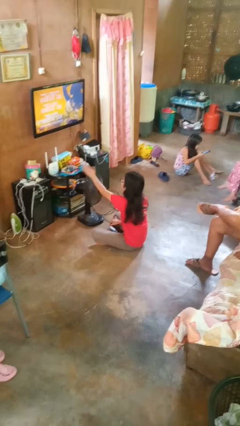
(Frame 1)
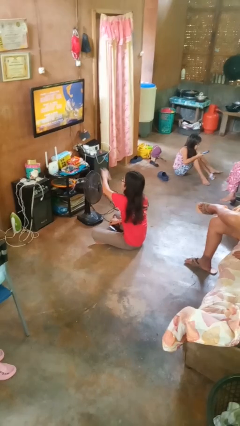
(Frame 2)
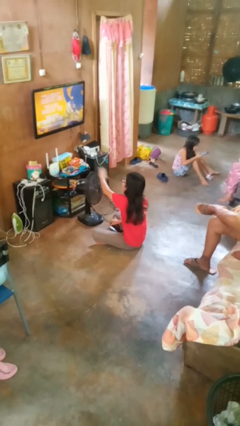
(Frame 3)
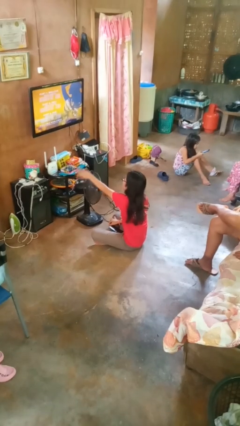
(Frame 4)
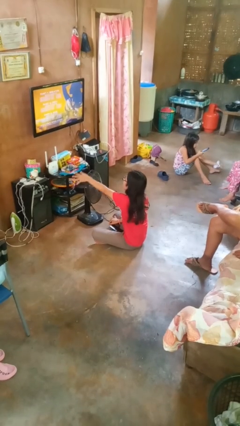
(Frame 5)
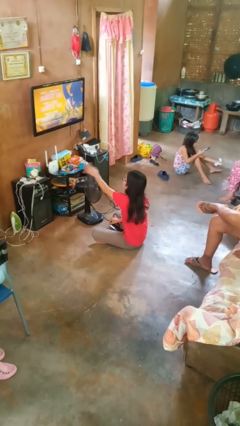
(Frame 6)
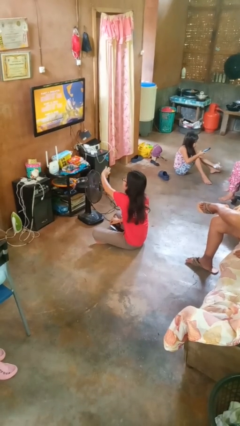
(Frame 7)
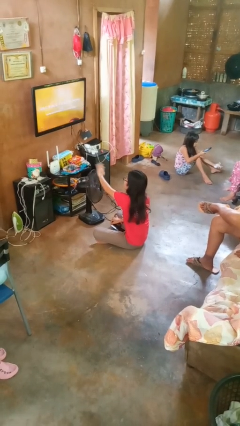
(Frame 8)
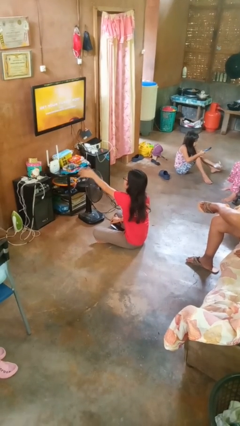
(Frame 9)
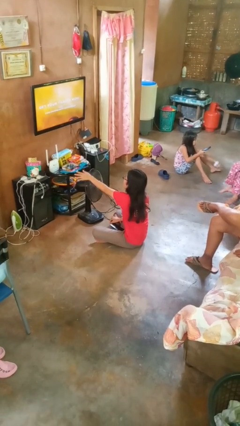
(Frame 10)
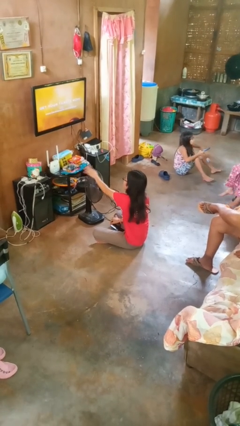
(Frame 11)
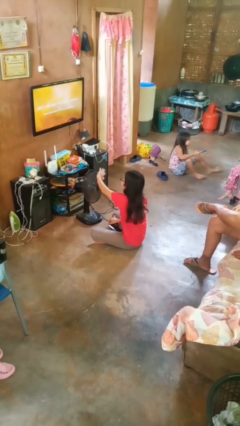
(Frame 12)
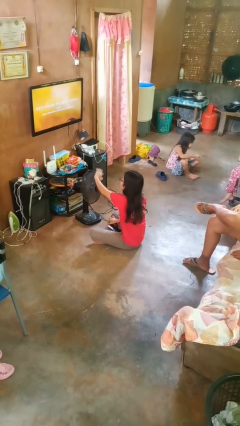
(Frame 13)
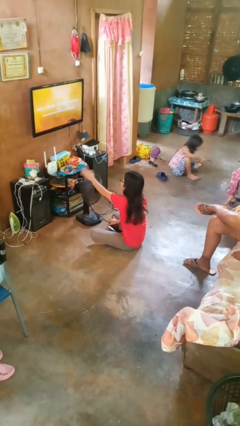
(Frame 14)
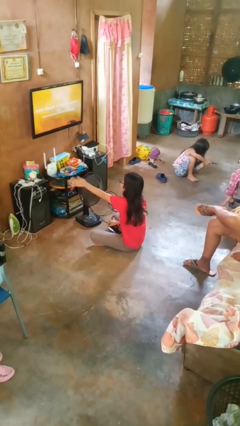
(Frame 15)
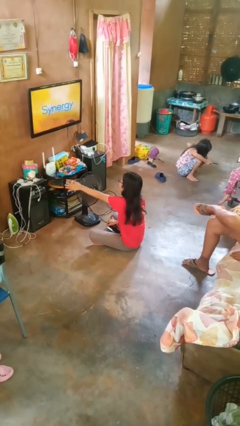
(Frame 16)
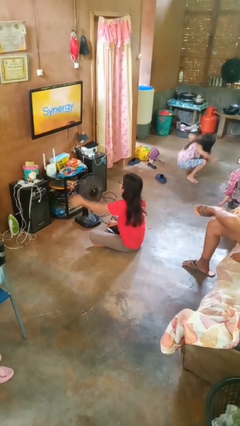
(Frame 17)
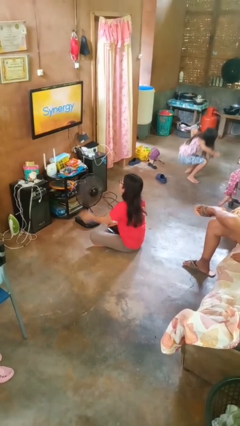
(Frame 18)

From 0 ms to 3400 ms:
person waves hand over object

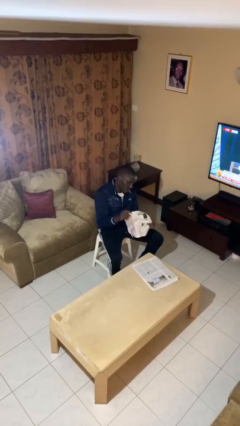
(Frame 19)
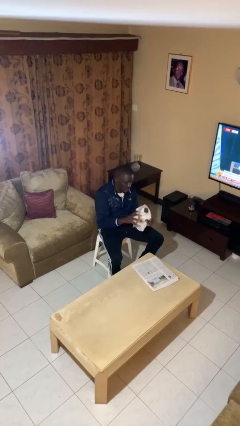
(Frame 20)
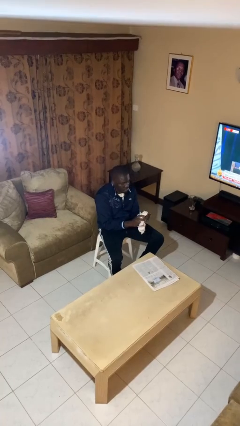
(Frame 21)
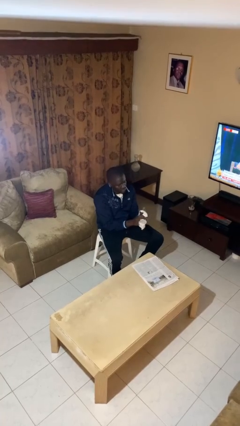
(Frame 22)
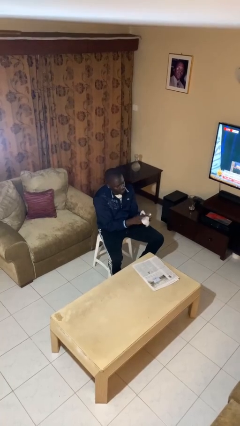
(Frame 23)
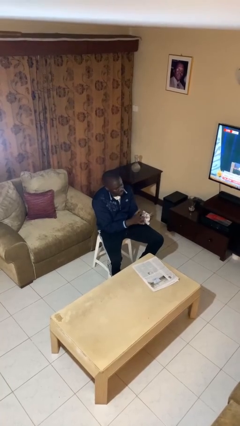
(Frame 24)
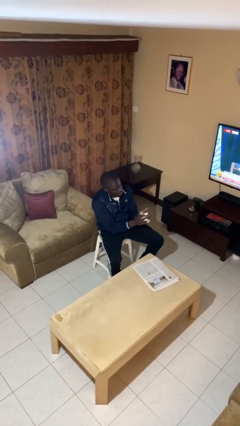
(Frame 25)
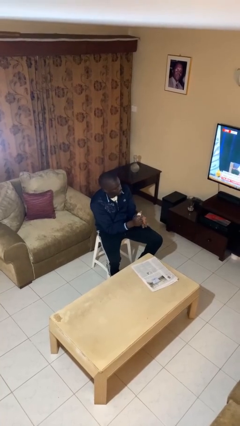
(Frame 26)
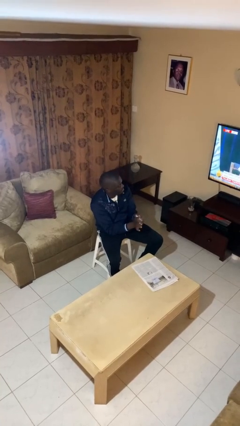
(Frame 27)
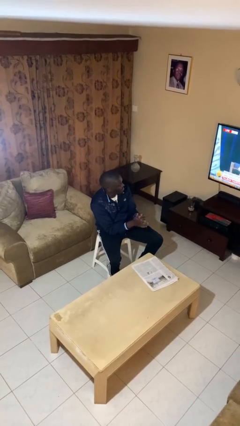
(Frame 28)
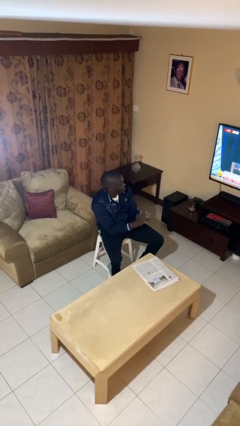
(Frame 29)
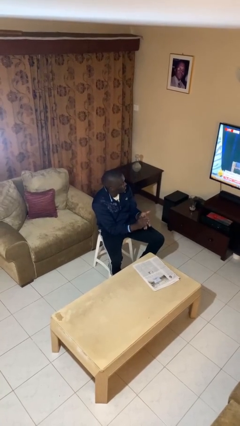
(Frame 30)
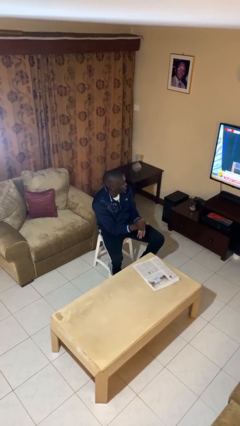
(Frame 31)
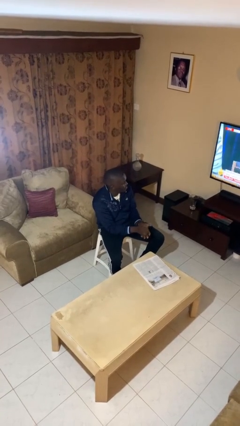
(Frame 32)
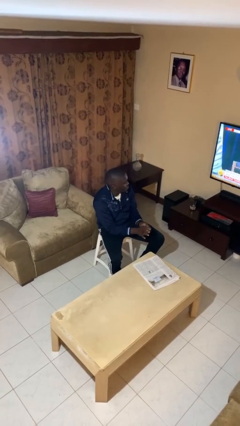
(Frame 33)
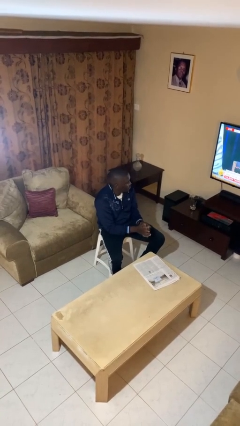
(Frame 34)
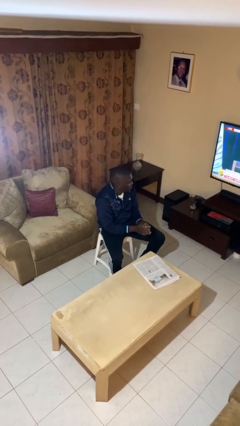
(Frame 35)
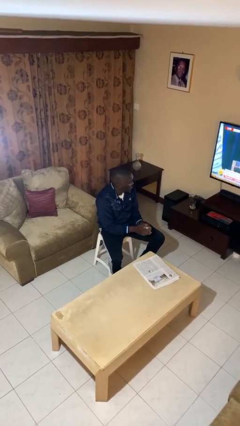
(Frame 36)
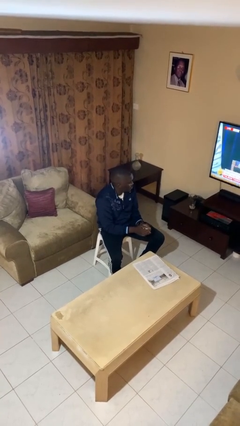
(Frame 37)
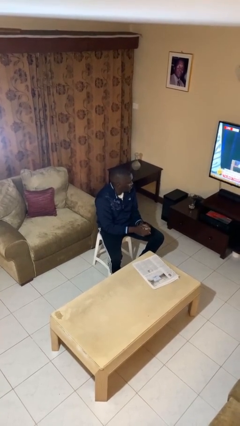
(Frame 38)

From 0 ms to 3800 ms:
person crumples paper

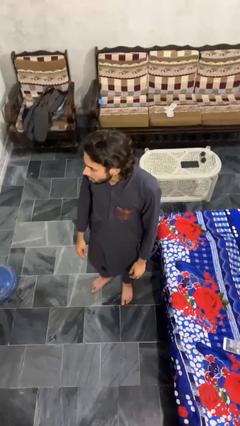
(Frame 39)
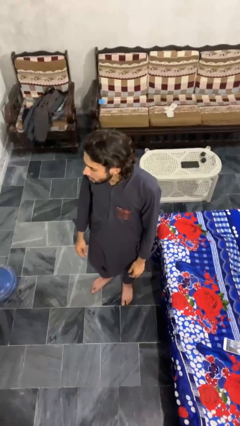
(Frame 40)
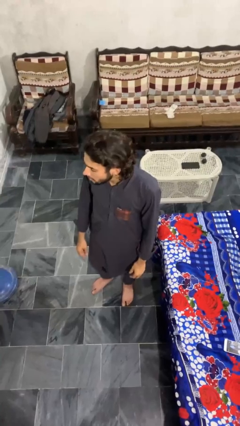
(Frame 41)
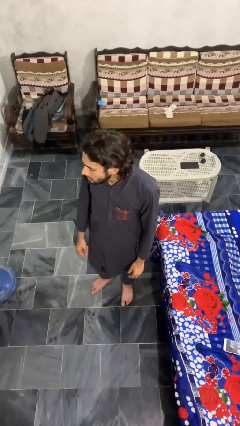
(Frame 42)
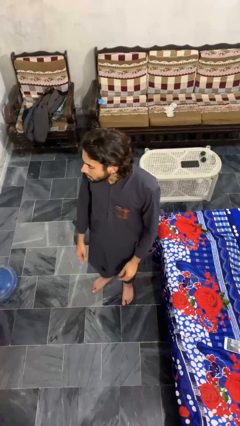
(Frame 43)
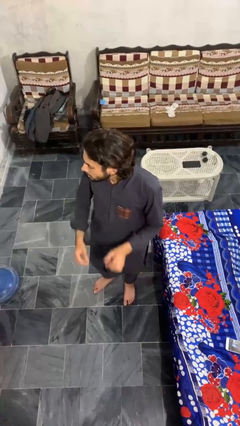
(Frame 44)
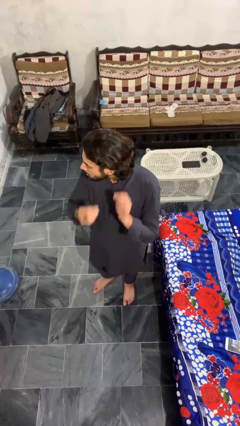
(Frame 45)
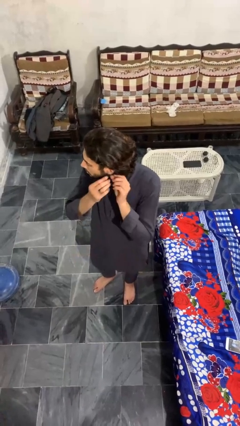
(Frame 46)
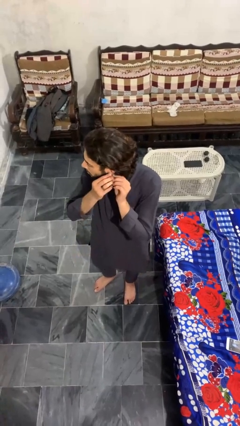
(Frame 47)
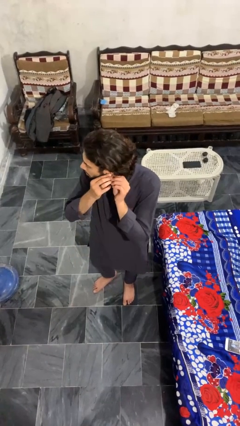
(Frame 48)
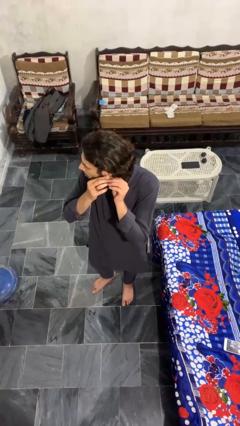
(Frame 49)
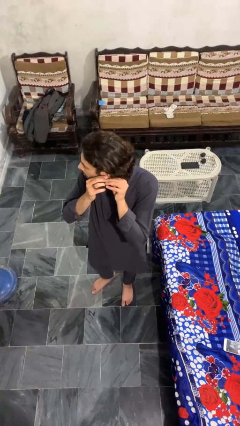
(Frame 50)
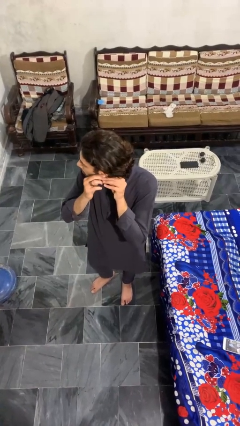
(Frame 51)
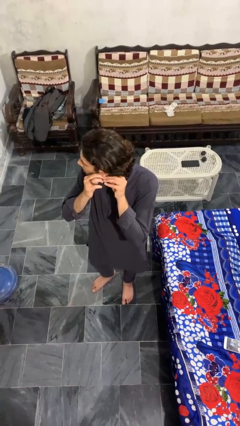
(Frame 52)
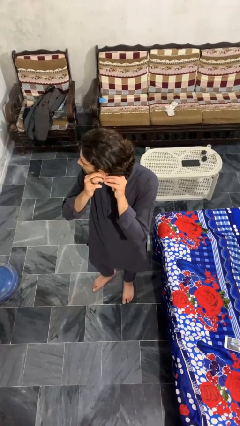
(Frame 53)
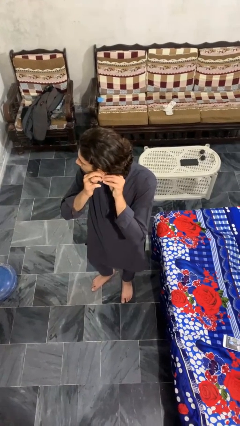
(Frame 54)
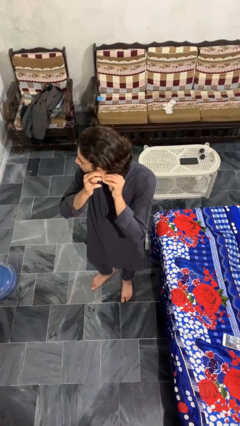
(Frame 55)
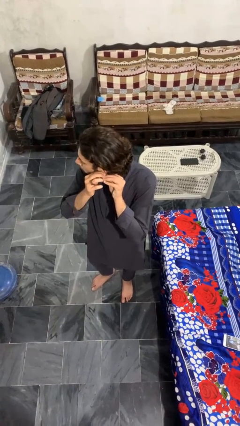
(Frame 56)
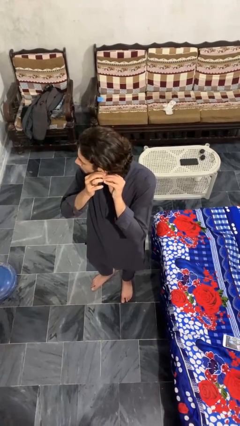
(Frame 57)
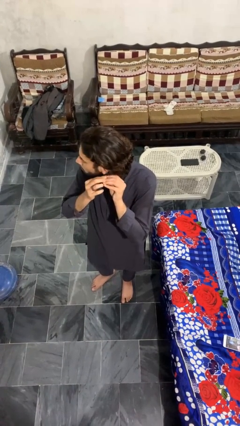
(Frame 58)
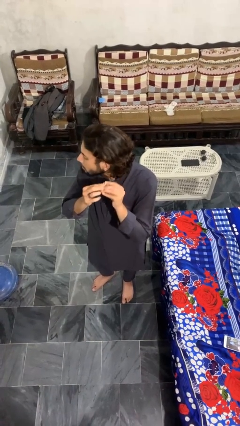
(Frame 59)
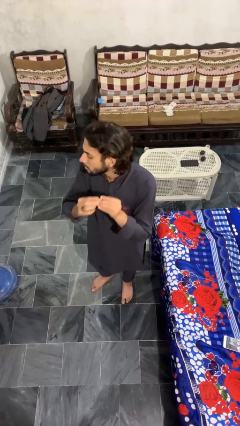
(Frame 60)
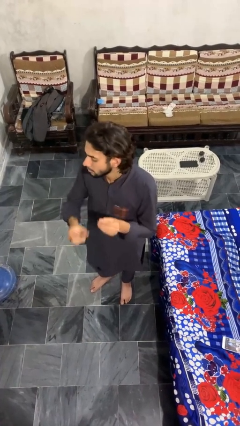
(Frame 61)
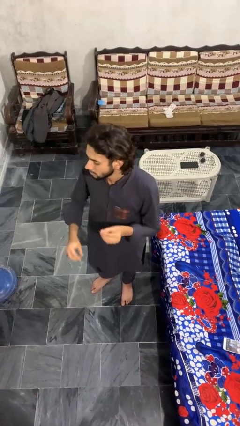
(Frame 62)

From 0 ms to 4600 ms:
person takes off earrings

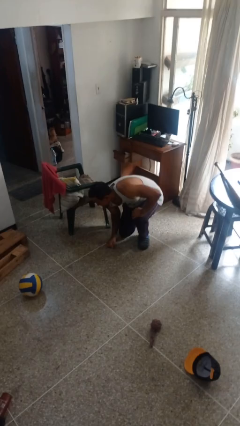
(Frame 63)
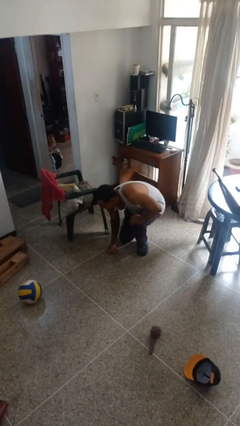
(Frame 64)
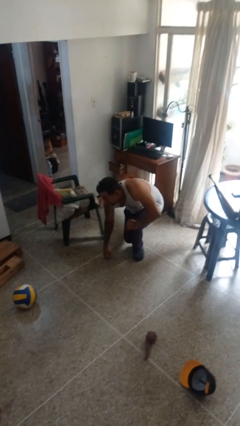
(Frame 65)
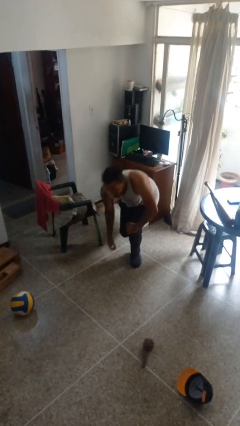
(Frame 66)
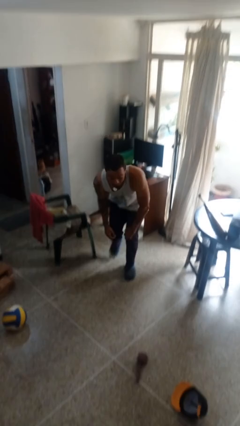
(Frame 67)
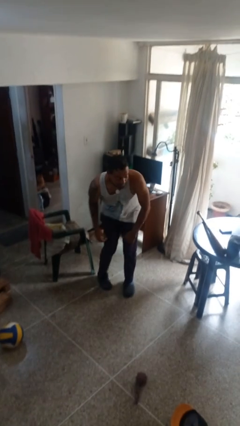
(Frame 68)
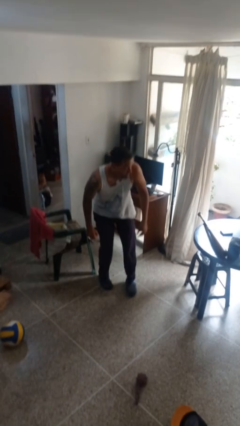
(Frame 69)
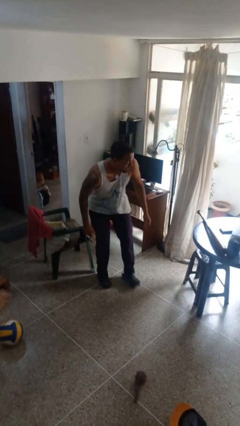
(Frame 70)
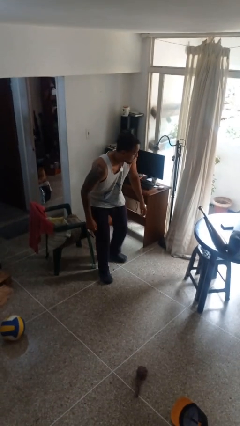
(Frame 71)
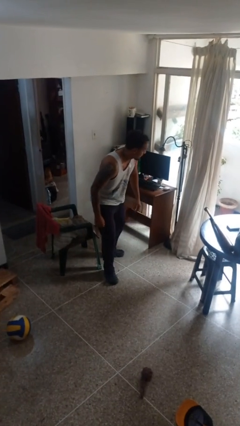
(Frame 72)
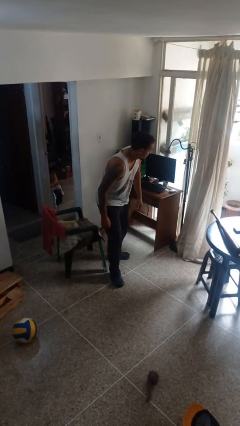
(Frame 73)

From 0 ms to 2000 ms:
person stands up from floor

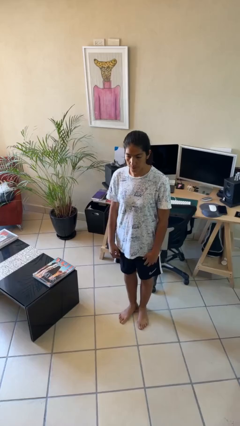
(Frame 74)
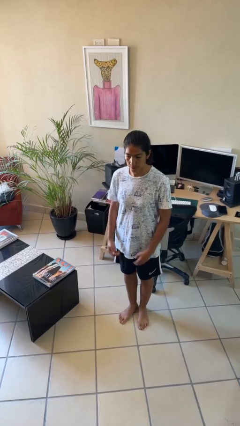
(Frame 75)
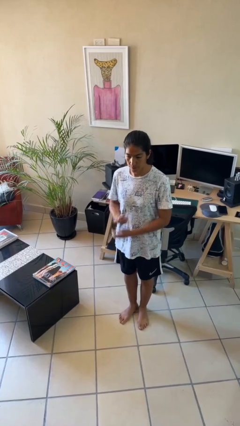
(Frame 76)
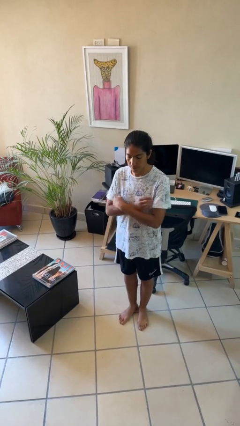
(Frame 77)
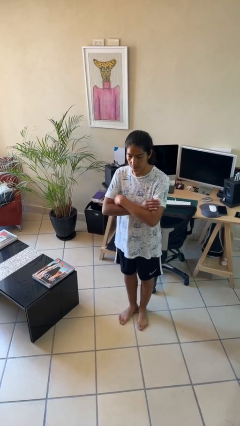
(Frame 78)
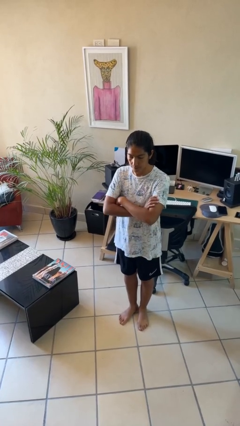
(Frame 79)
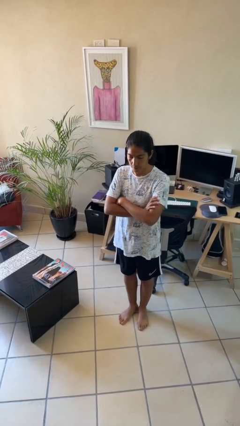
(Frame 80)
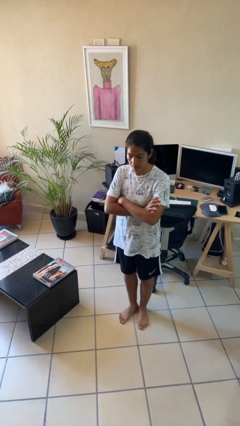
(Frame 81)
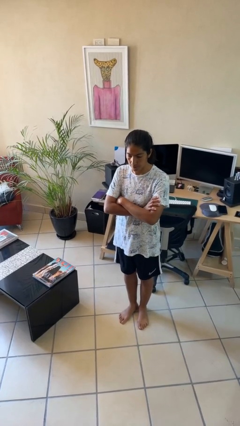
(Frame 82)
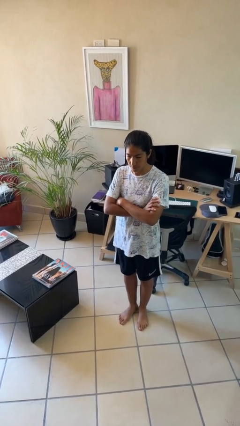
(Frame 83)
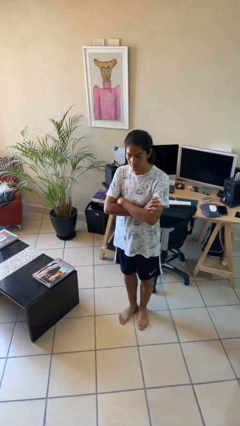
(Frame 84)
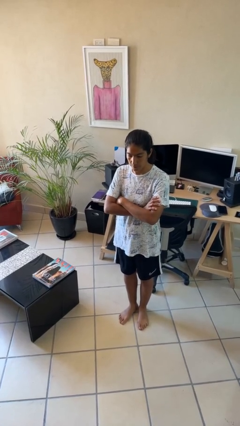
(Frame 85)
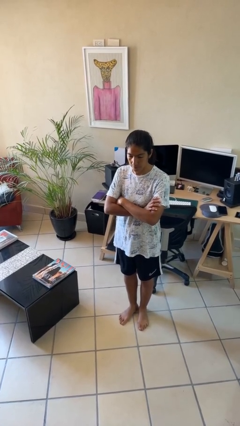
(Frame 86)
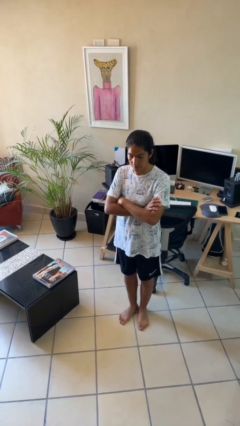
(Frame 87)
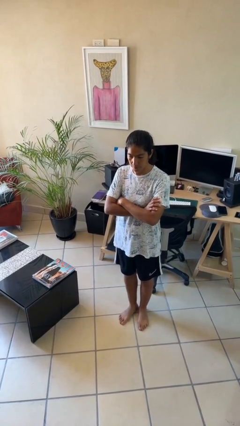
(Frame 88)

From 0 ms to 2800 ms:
person crosses arms

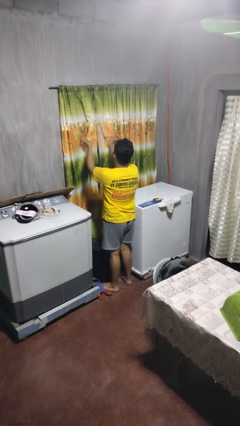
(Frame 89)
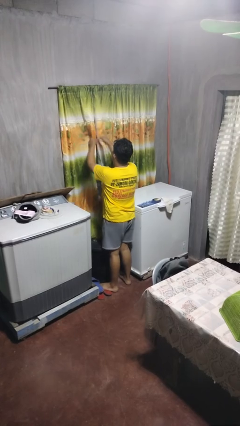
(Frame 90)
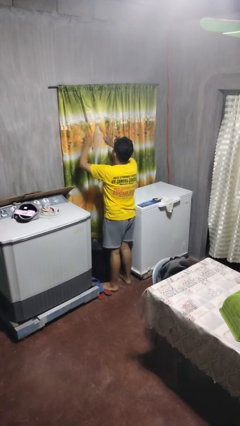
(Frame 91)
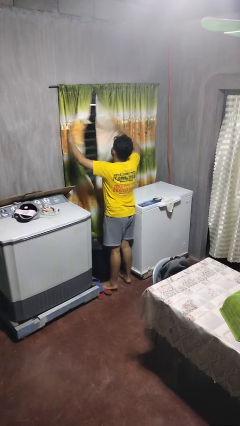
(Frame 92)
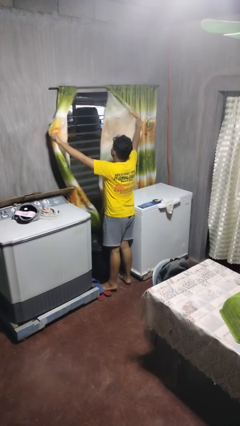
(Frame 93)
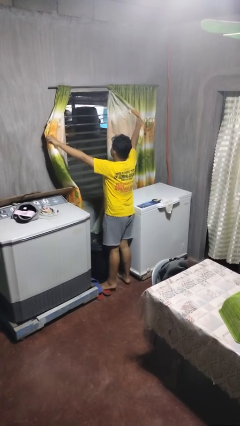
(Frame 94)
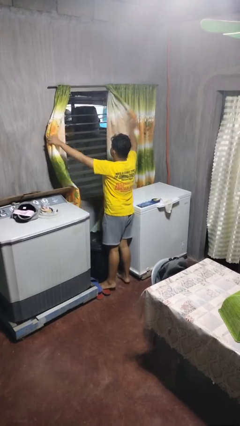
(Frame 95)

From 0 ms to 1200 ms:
person opens curtains
